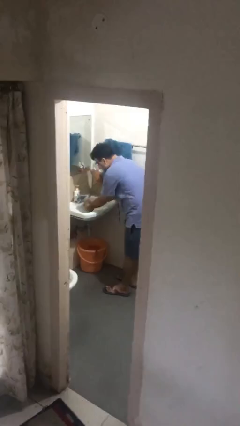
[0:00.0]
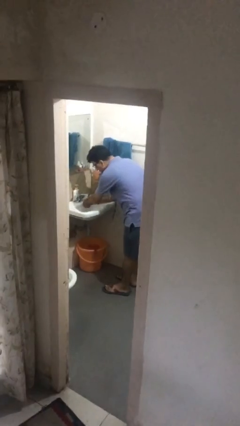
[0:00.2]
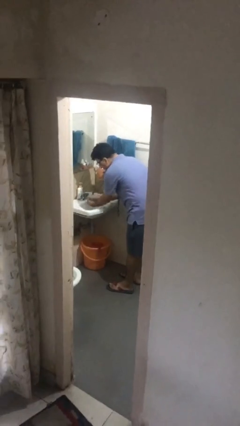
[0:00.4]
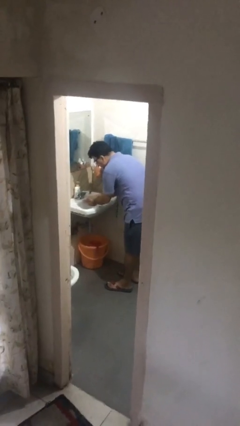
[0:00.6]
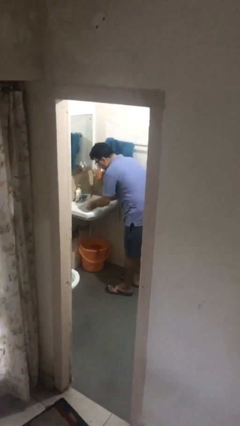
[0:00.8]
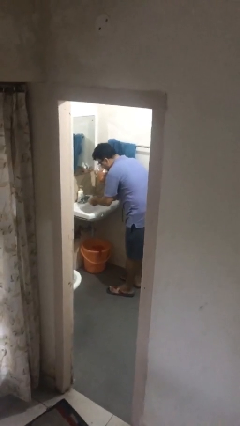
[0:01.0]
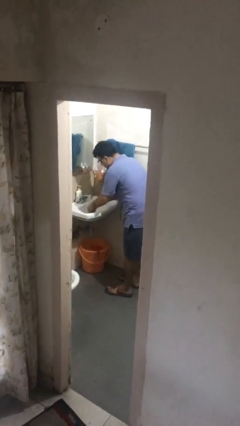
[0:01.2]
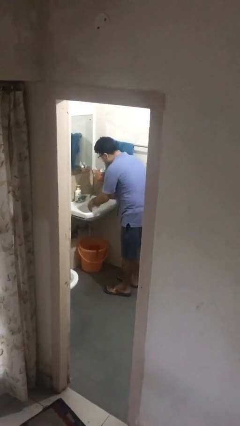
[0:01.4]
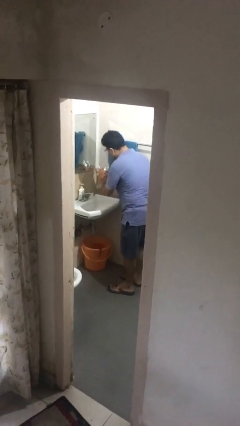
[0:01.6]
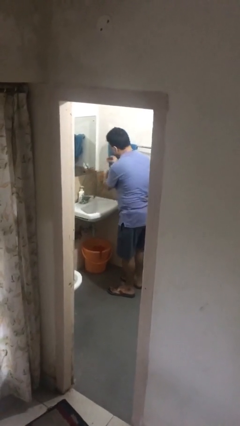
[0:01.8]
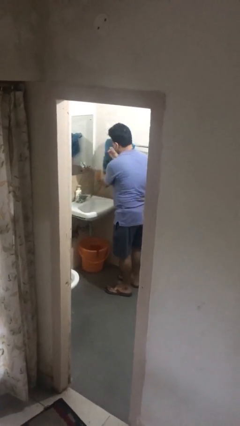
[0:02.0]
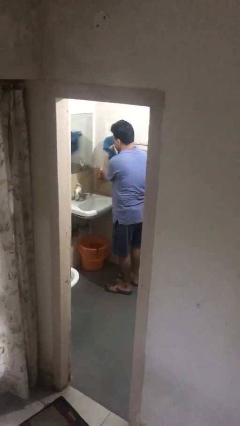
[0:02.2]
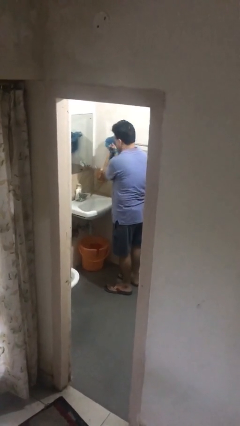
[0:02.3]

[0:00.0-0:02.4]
person washes hands

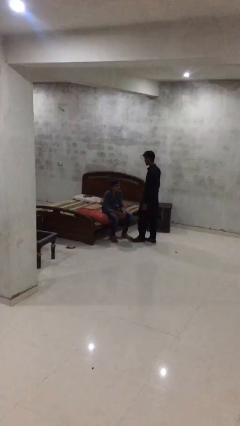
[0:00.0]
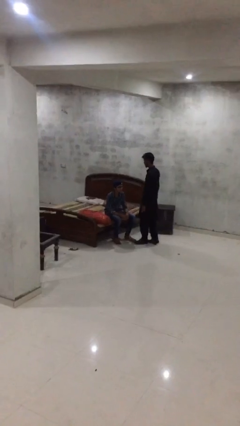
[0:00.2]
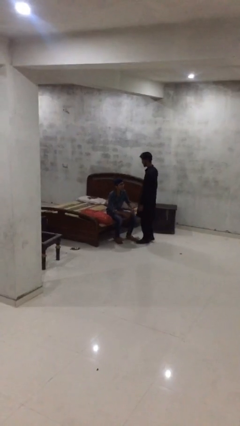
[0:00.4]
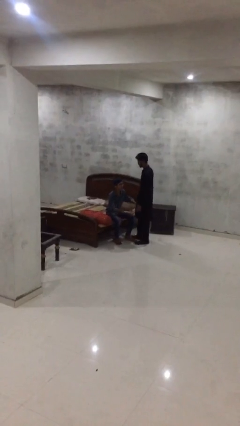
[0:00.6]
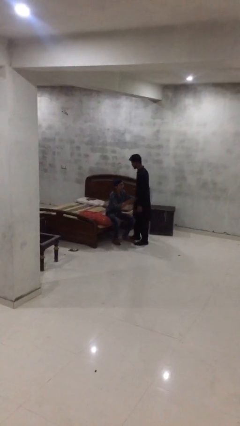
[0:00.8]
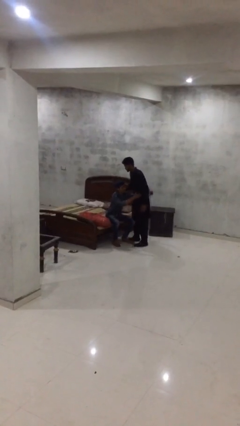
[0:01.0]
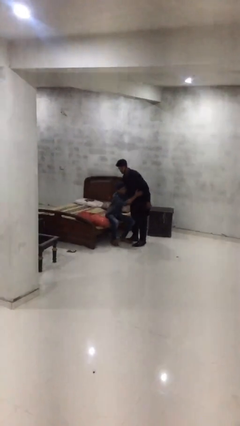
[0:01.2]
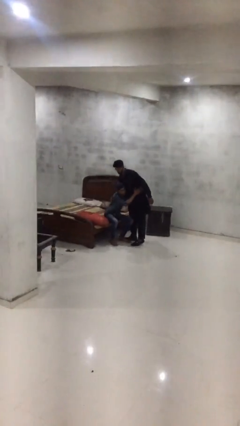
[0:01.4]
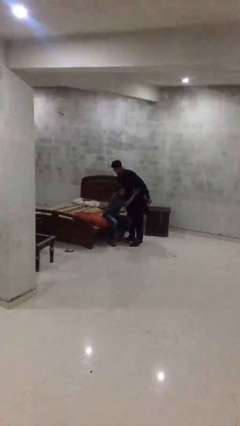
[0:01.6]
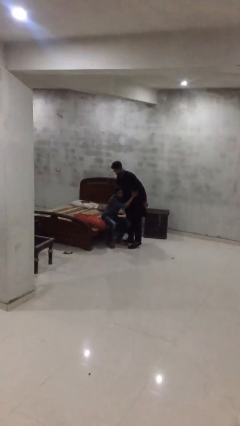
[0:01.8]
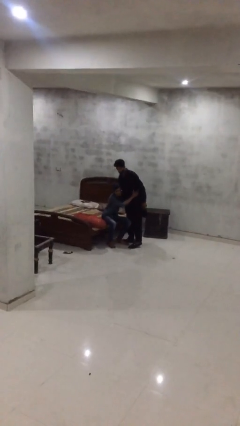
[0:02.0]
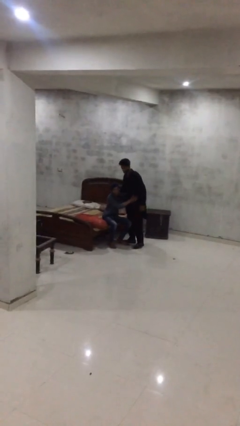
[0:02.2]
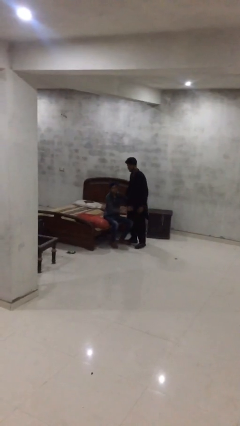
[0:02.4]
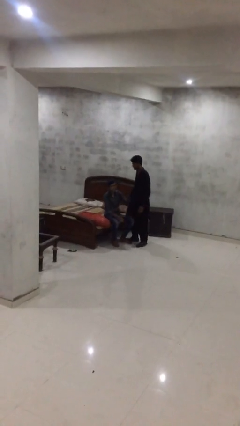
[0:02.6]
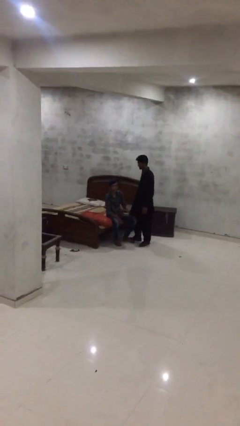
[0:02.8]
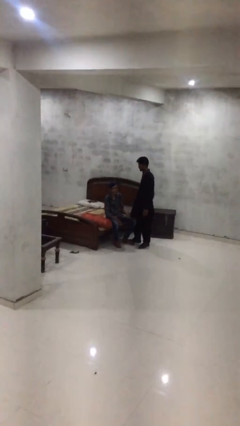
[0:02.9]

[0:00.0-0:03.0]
person embraces person

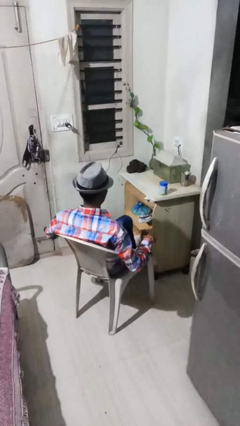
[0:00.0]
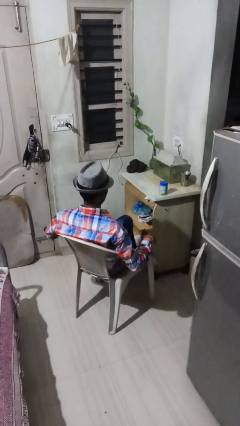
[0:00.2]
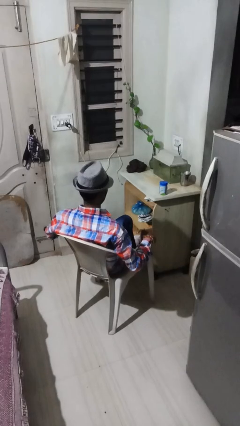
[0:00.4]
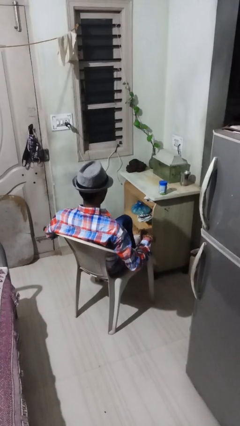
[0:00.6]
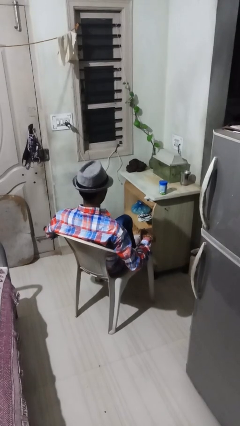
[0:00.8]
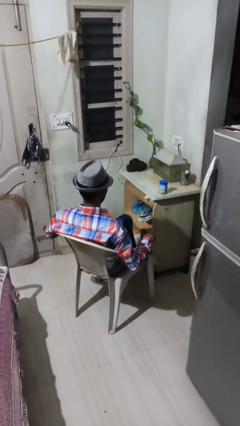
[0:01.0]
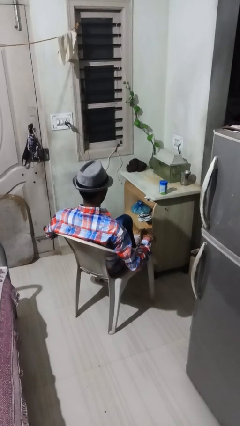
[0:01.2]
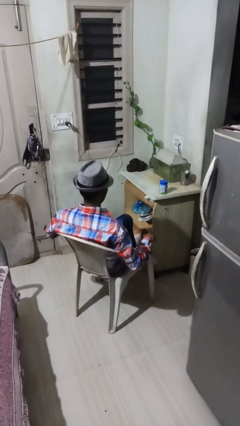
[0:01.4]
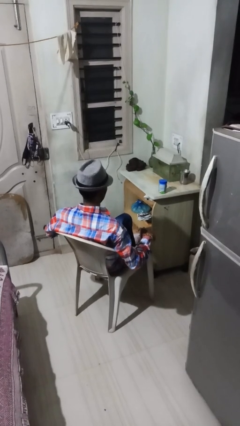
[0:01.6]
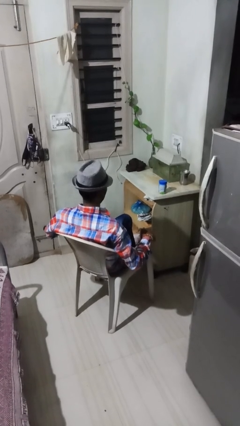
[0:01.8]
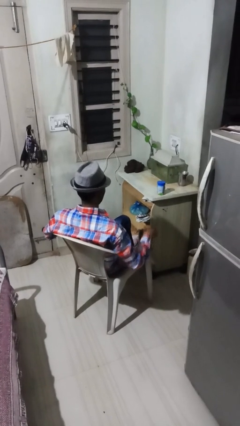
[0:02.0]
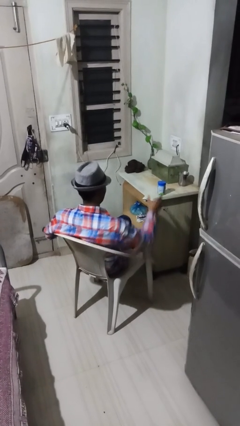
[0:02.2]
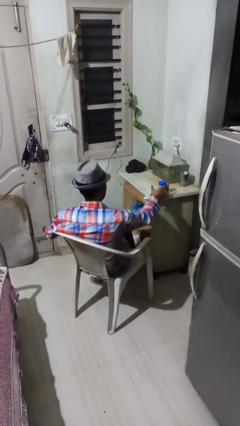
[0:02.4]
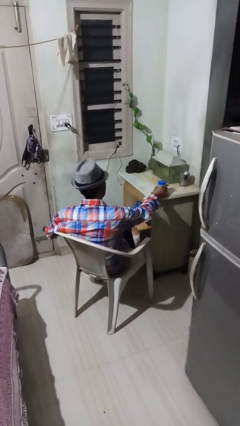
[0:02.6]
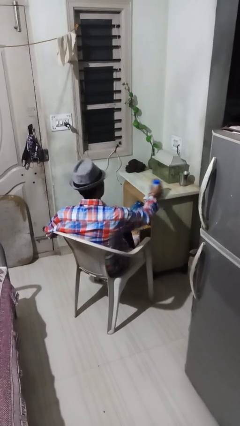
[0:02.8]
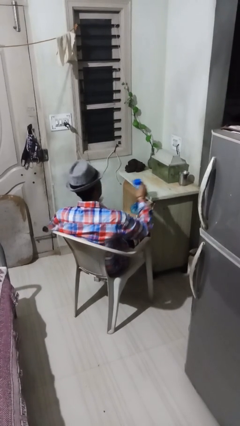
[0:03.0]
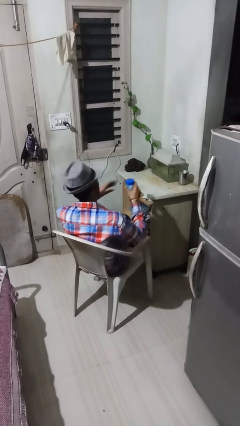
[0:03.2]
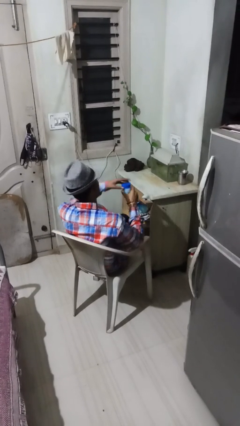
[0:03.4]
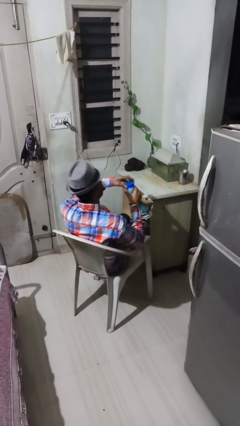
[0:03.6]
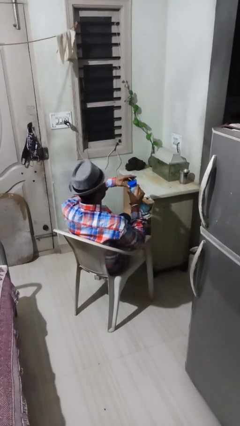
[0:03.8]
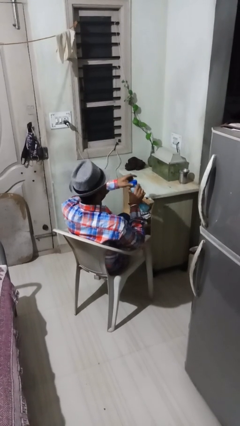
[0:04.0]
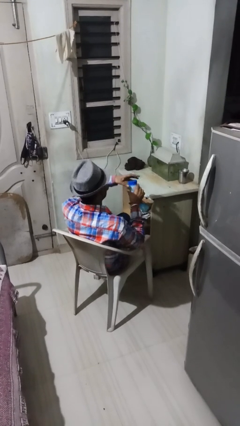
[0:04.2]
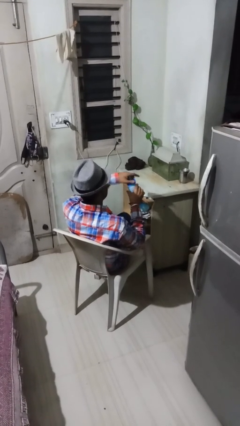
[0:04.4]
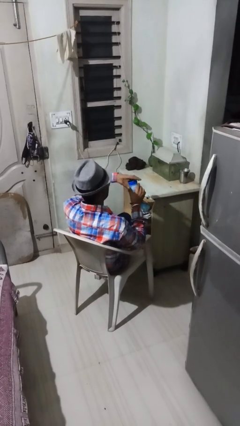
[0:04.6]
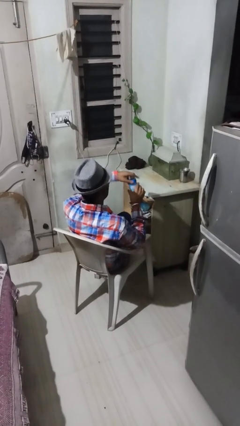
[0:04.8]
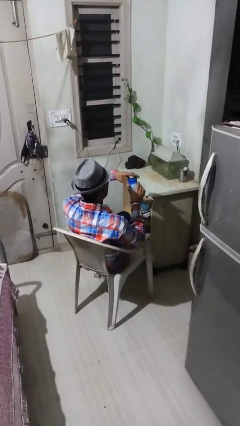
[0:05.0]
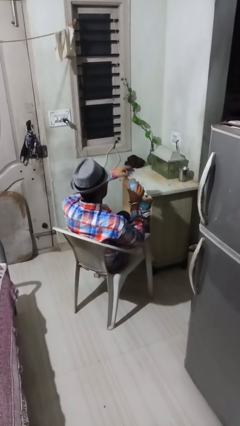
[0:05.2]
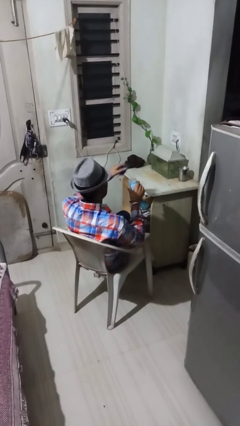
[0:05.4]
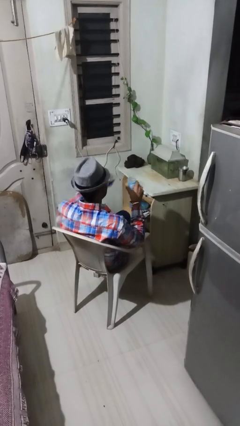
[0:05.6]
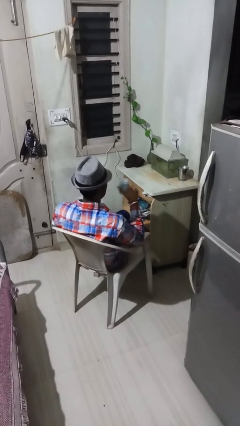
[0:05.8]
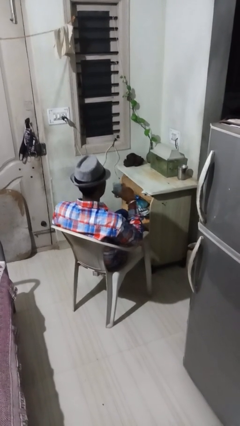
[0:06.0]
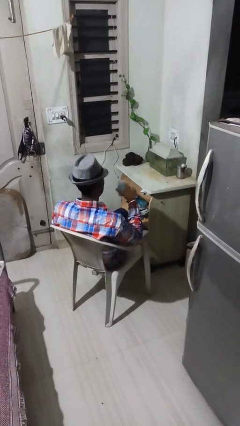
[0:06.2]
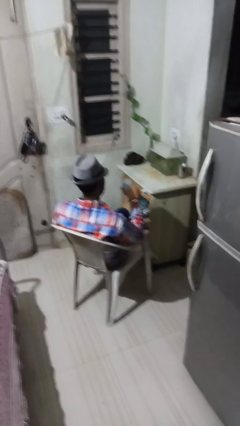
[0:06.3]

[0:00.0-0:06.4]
person opens jar

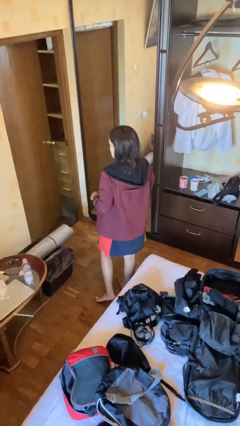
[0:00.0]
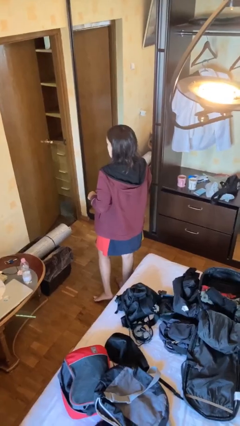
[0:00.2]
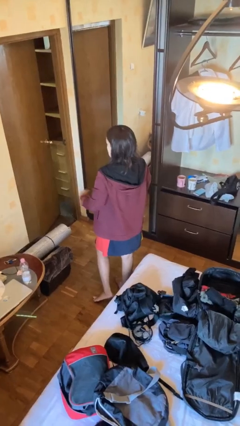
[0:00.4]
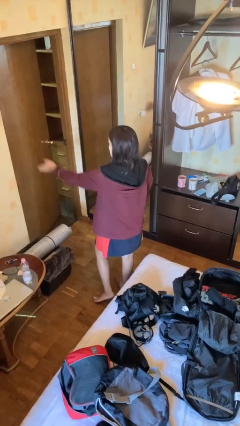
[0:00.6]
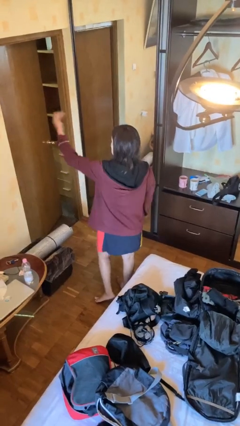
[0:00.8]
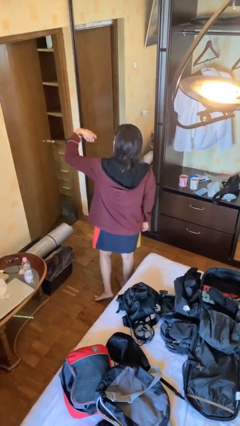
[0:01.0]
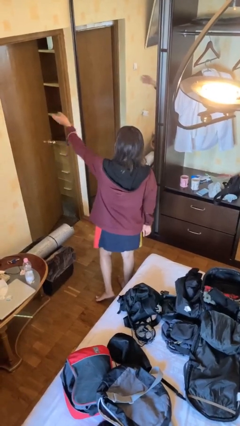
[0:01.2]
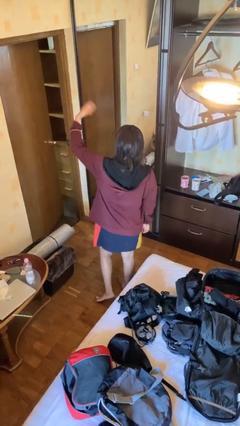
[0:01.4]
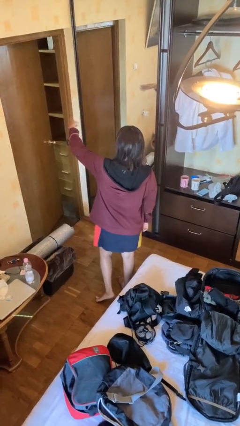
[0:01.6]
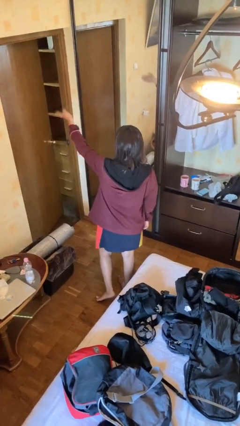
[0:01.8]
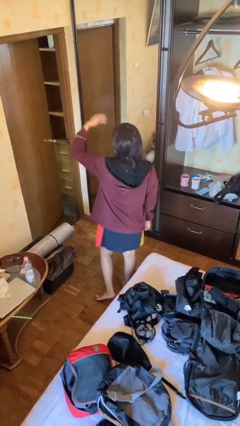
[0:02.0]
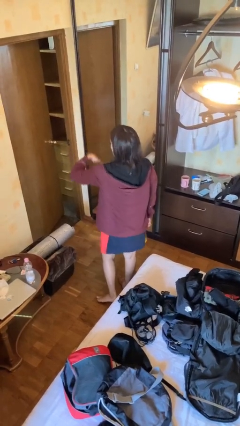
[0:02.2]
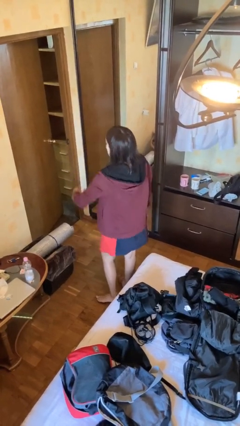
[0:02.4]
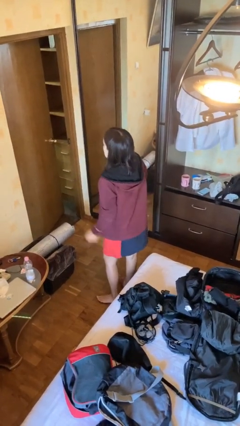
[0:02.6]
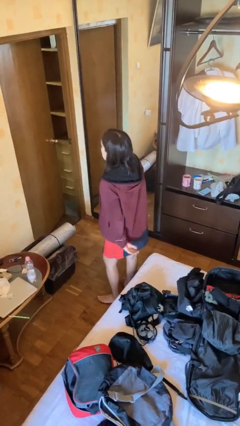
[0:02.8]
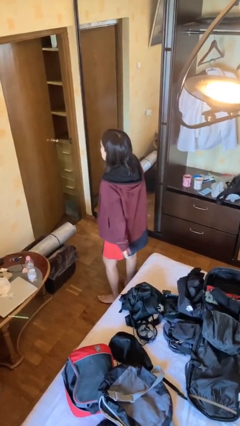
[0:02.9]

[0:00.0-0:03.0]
person gestures come here

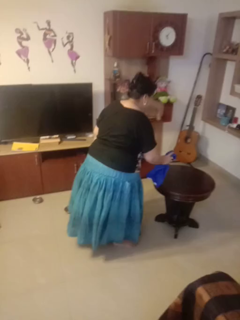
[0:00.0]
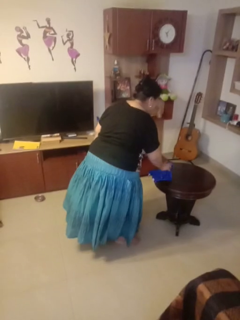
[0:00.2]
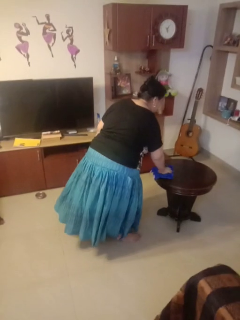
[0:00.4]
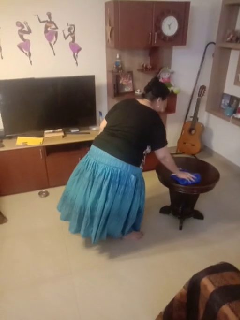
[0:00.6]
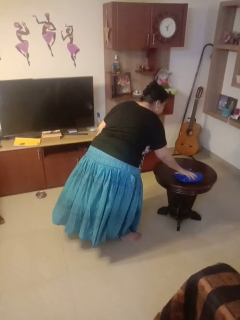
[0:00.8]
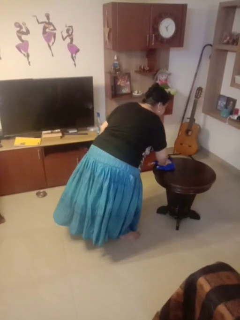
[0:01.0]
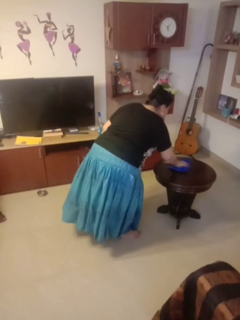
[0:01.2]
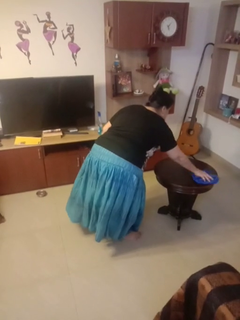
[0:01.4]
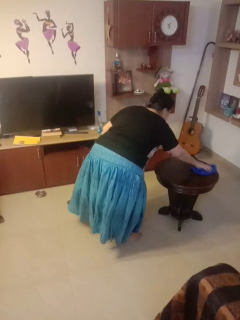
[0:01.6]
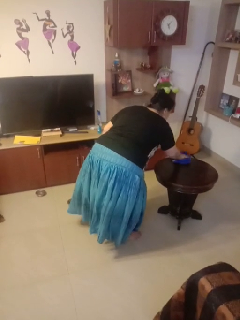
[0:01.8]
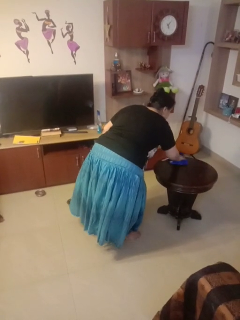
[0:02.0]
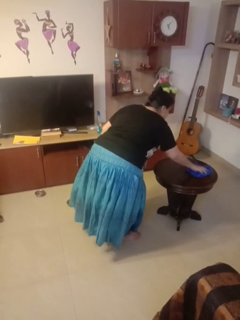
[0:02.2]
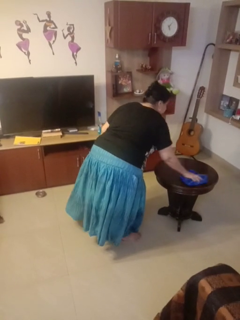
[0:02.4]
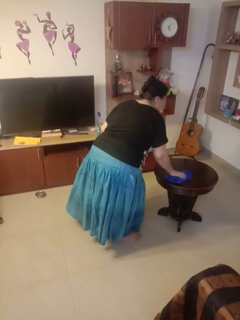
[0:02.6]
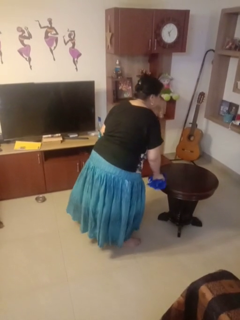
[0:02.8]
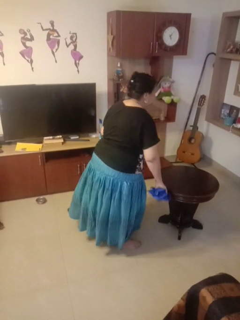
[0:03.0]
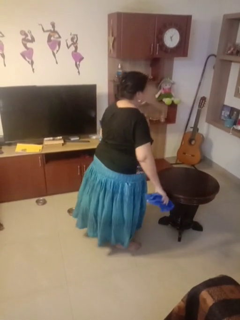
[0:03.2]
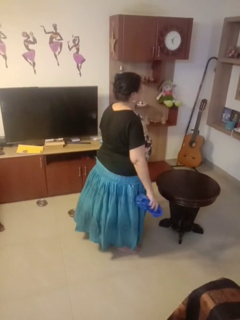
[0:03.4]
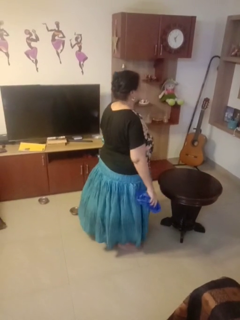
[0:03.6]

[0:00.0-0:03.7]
person cleans table with rag
